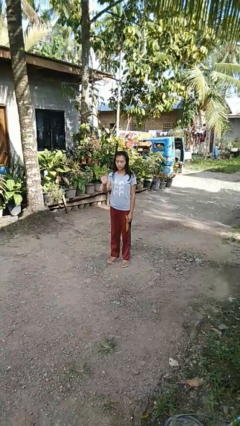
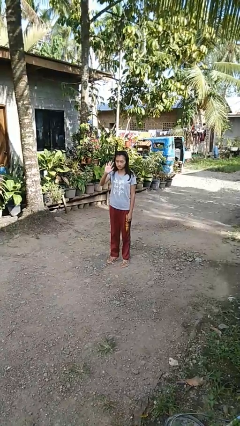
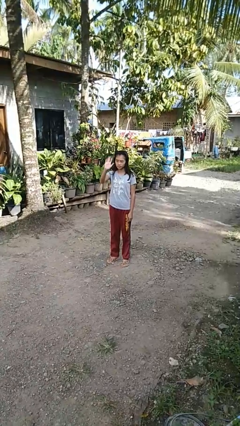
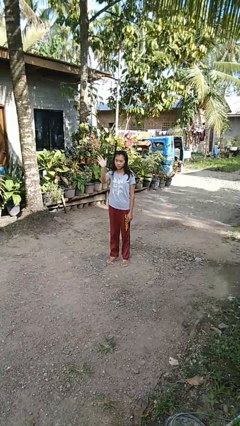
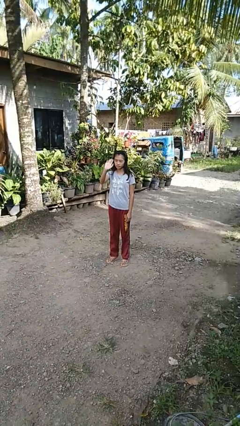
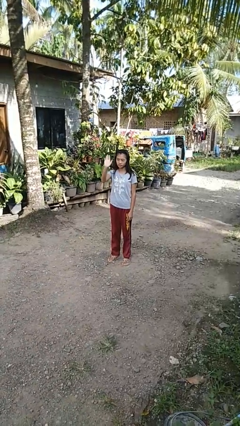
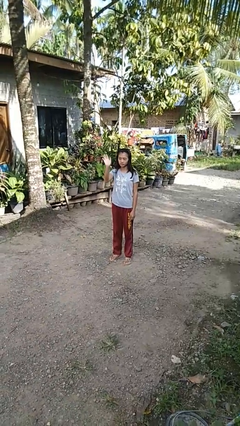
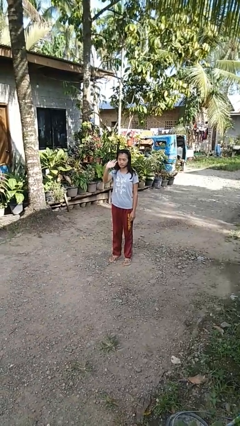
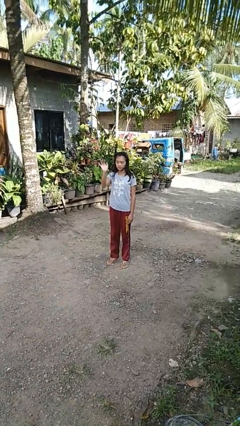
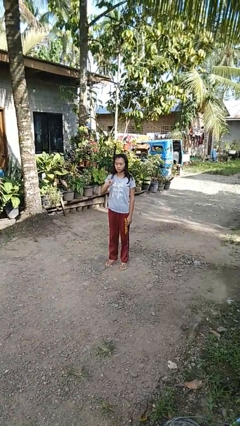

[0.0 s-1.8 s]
person waves at person

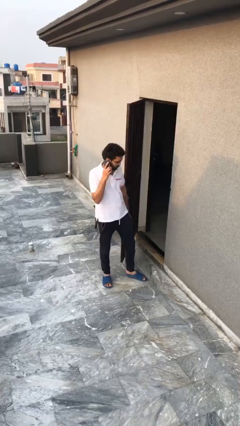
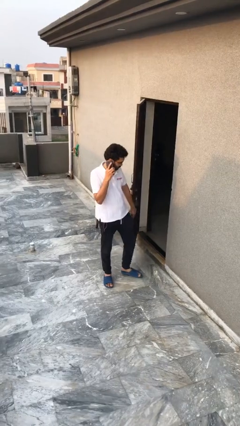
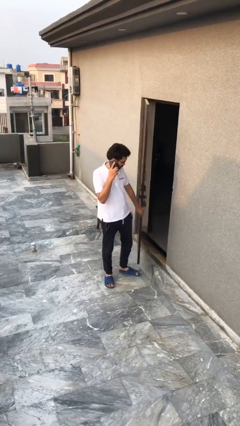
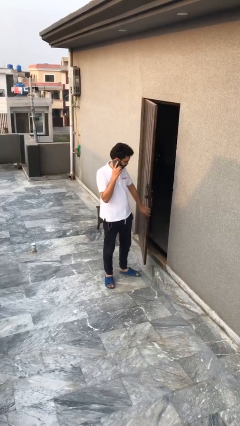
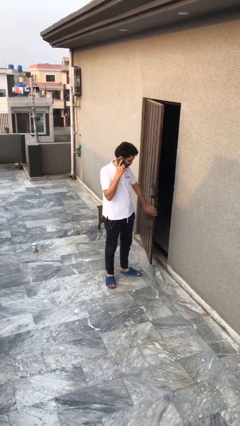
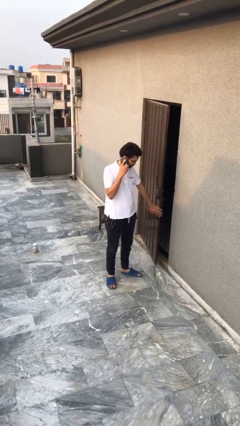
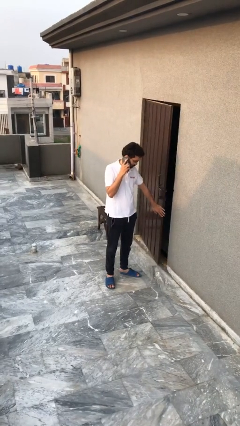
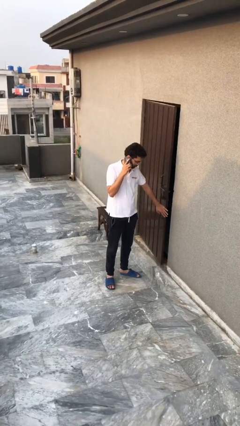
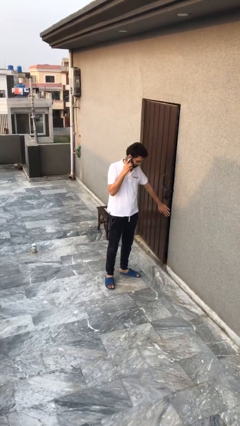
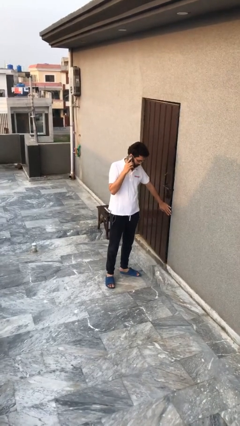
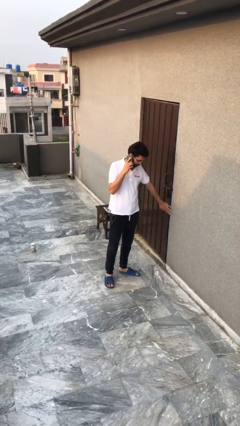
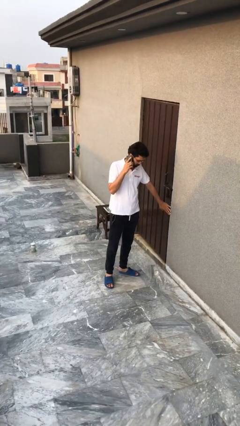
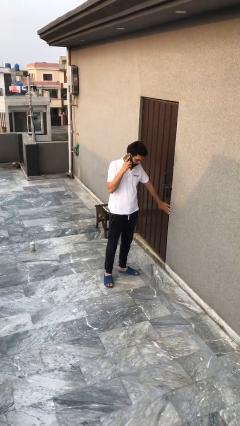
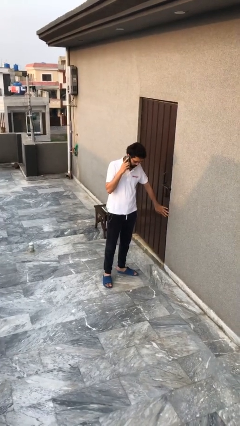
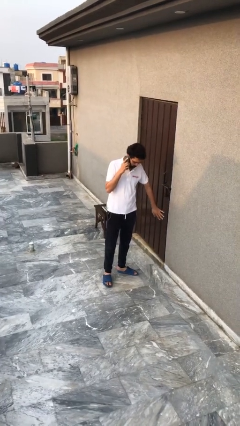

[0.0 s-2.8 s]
person closes facility door

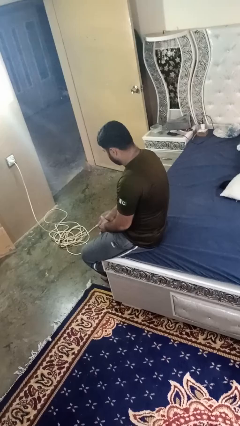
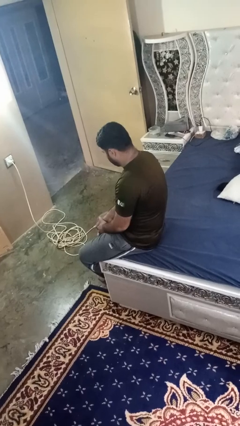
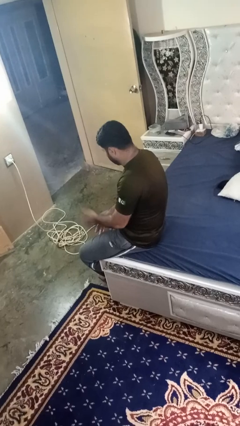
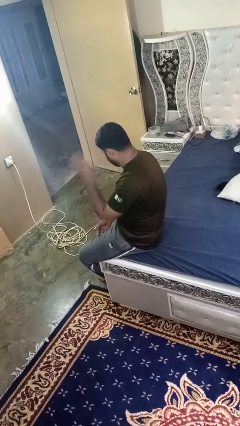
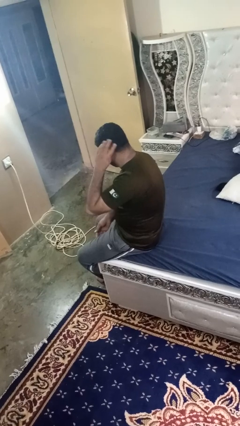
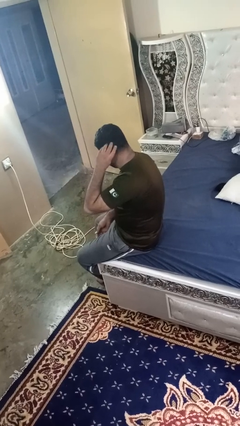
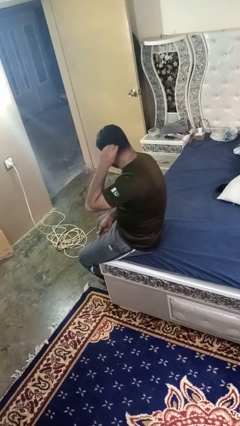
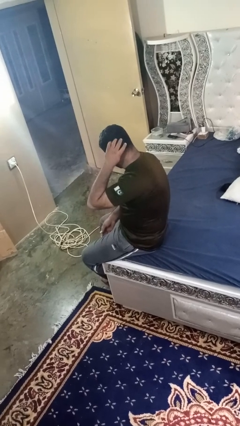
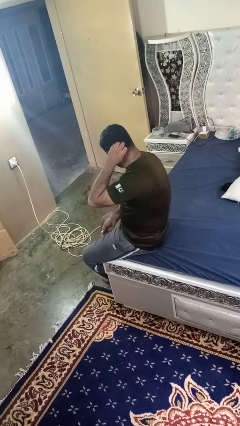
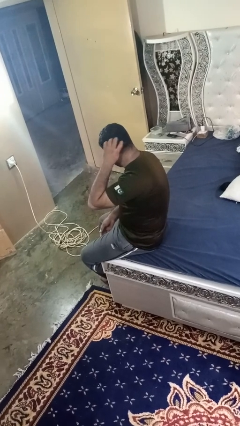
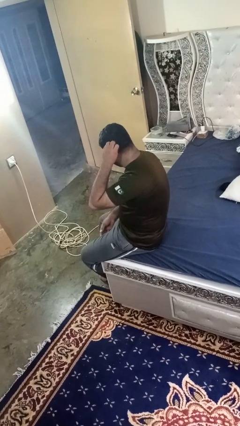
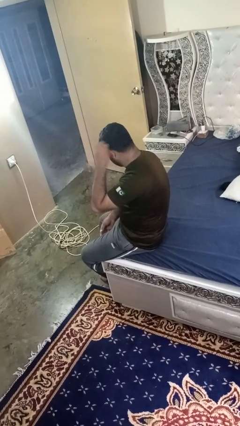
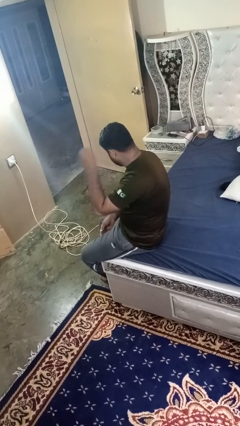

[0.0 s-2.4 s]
person strokes hair

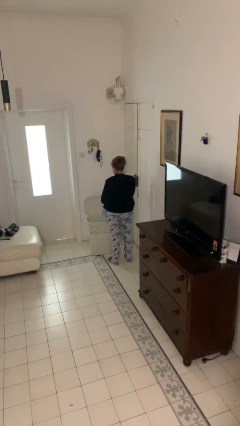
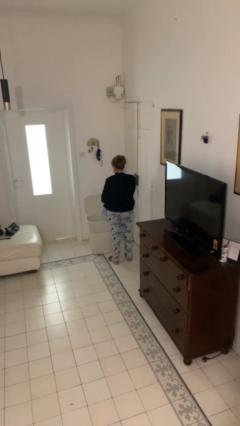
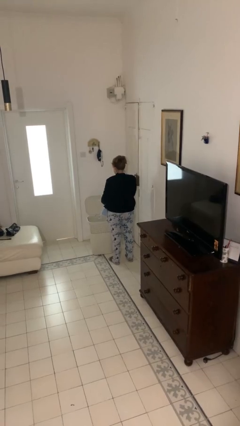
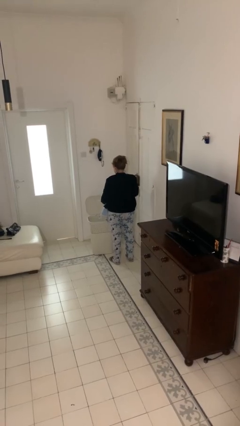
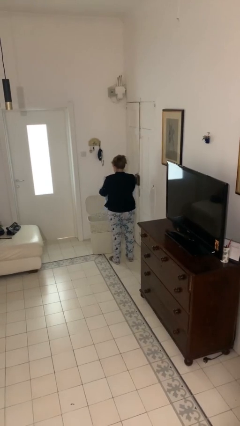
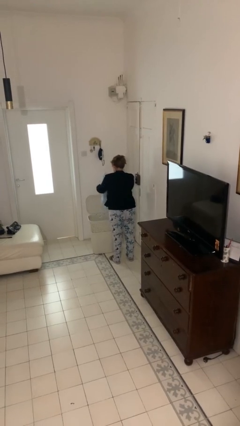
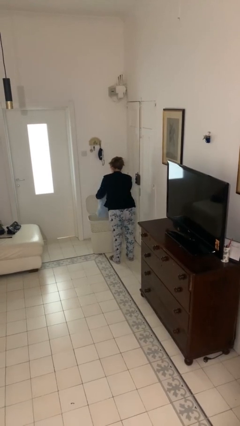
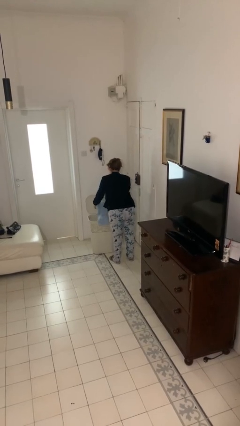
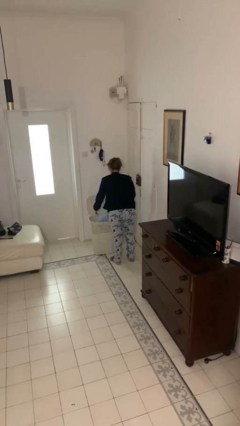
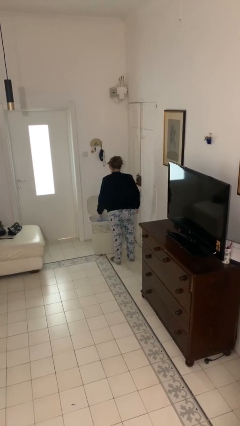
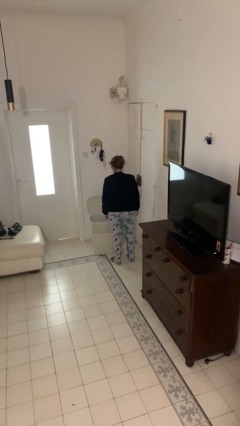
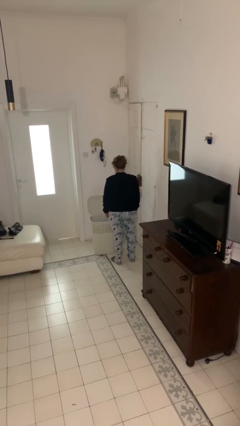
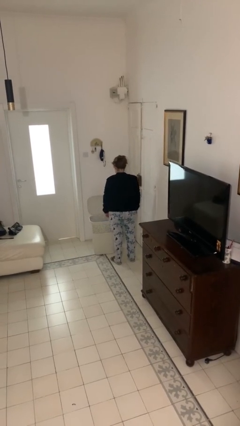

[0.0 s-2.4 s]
person puts object into basket

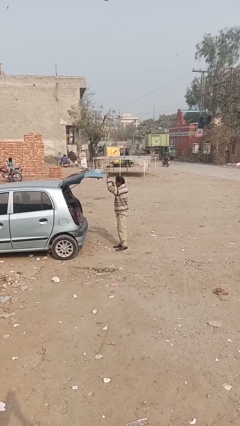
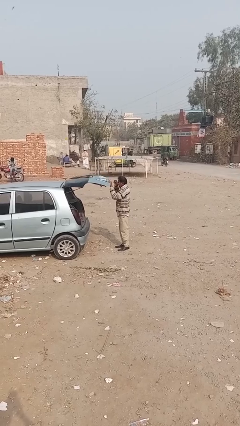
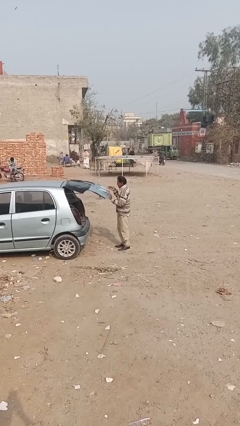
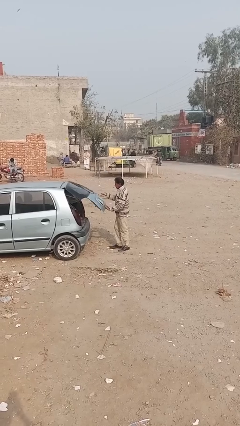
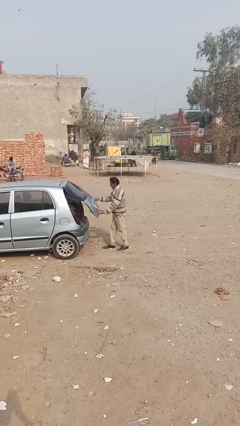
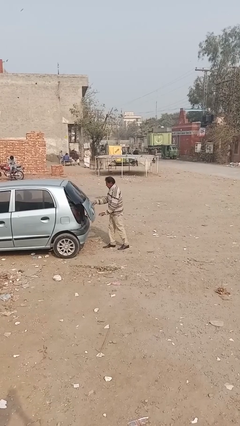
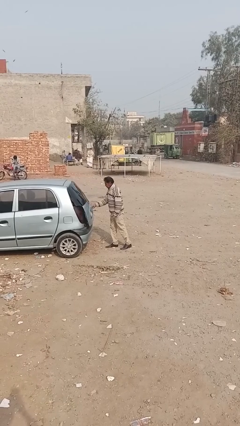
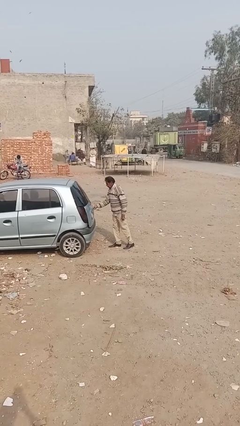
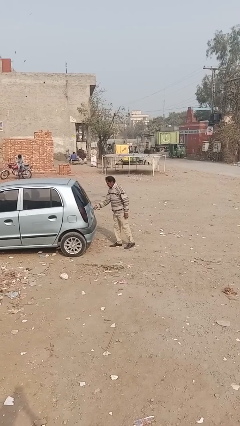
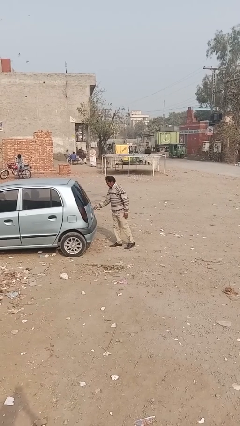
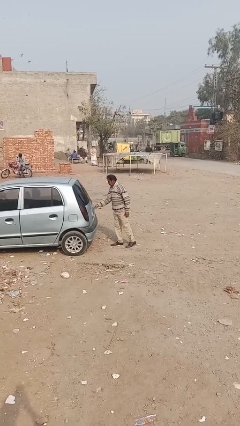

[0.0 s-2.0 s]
person closes car trunk

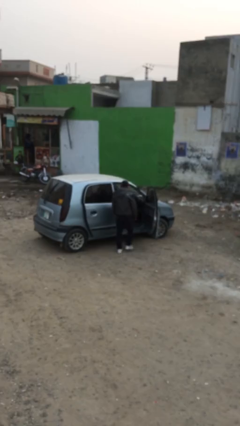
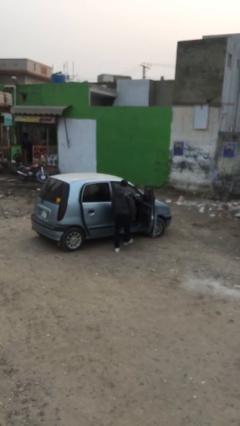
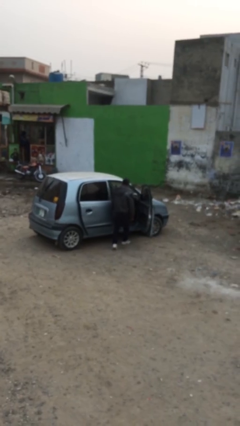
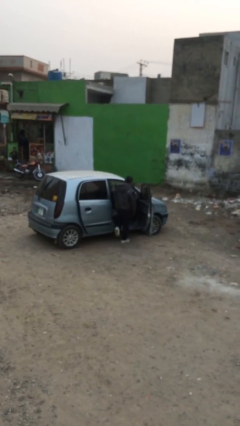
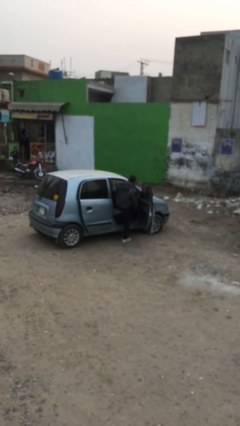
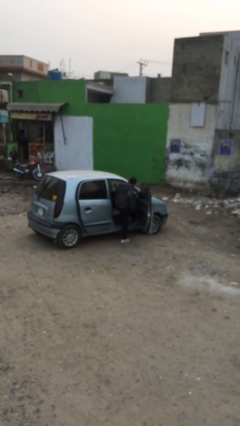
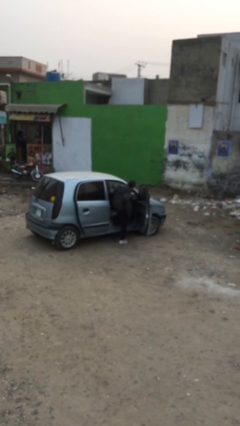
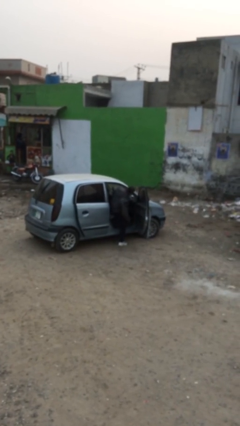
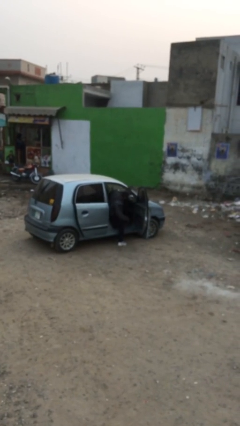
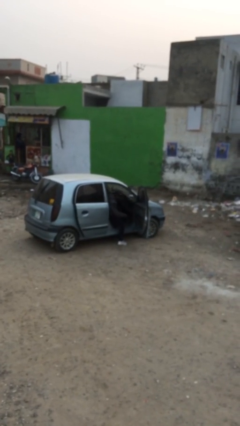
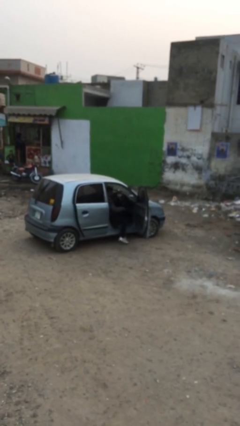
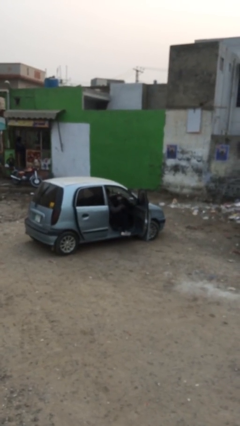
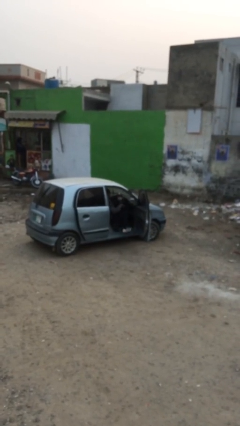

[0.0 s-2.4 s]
person enters car

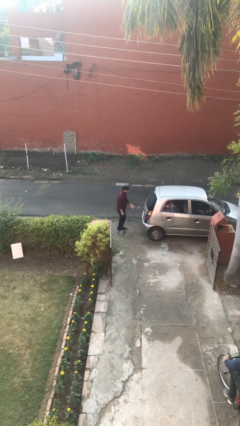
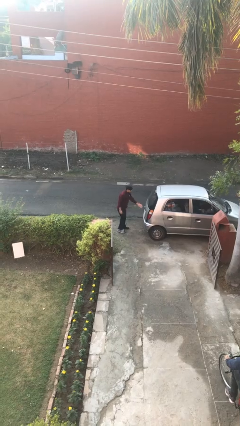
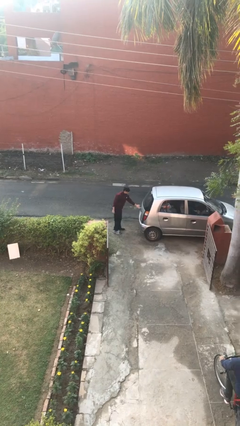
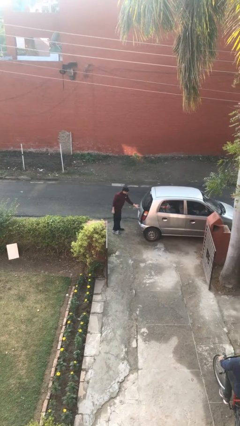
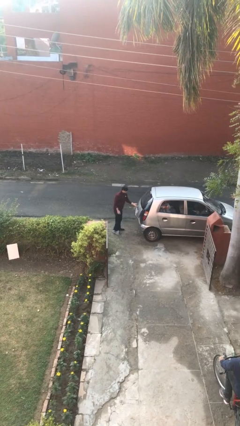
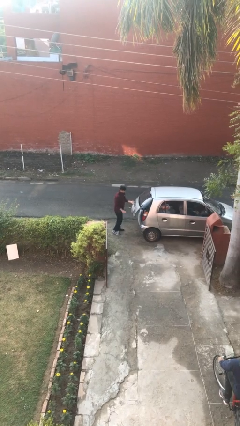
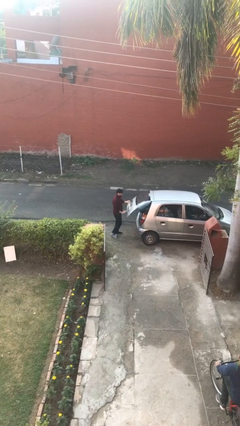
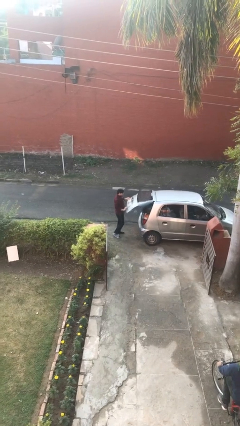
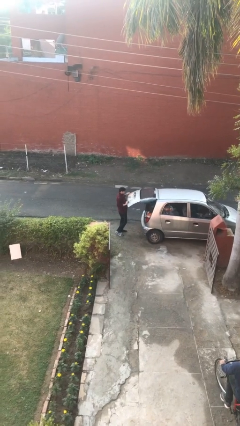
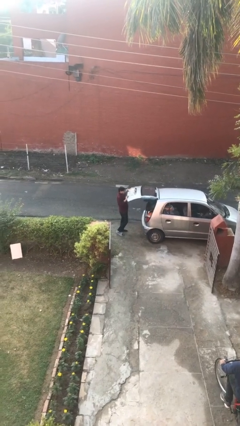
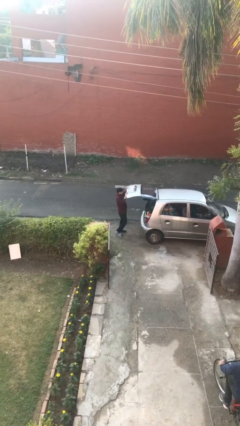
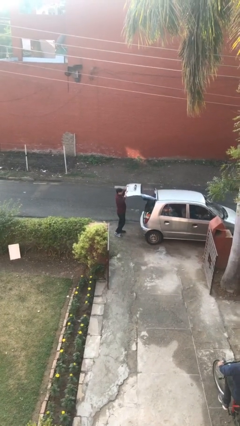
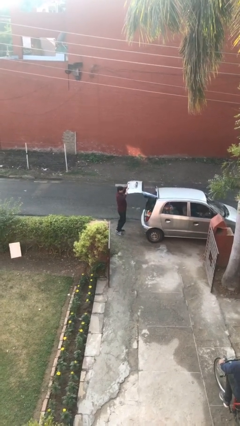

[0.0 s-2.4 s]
person opens car trunk

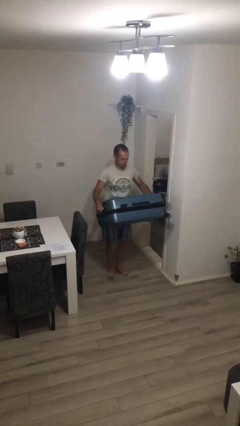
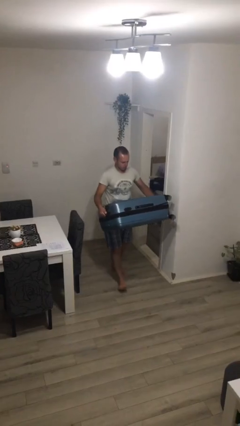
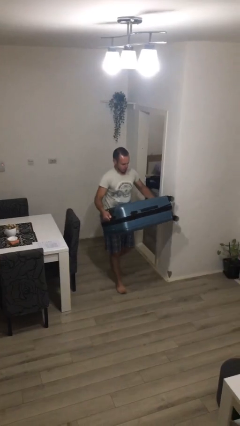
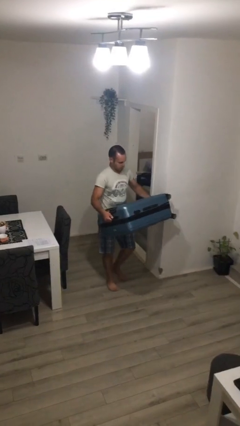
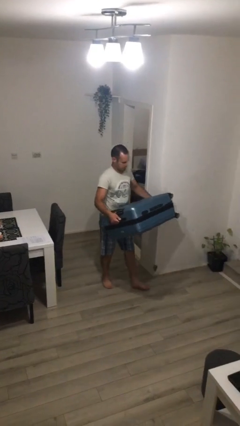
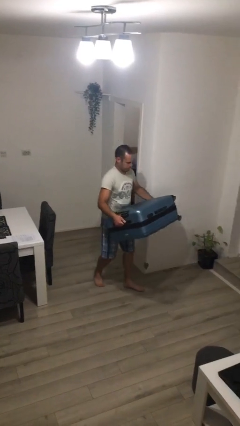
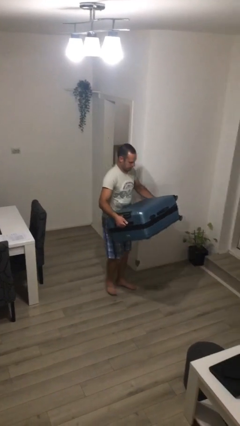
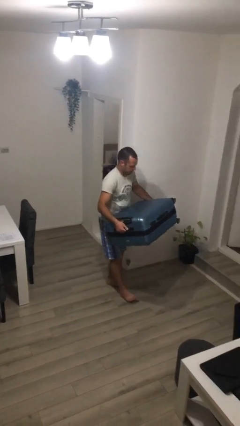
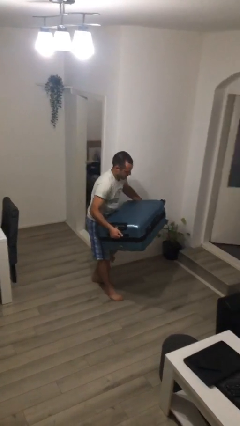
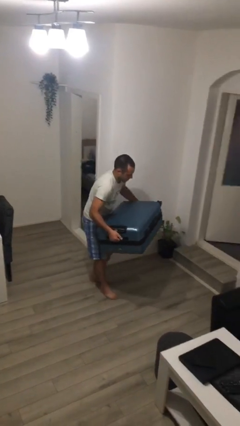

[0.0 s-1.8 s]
person carries heavy object
